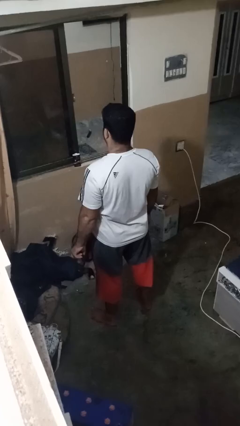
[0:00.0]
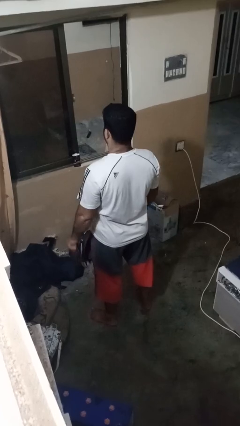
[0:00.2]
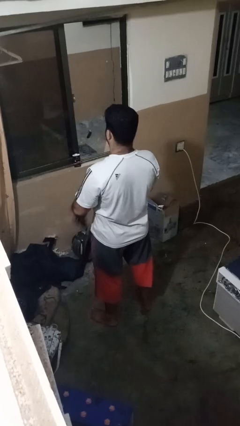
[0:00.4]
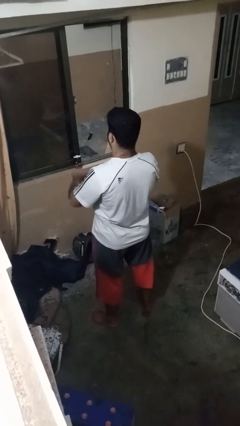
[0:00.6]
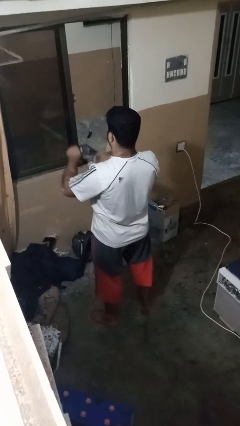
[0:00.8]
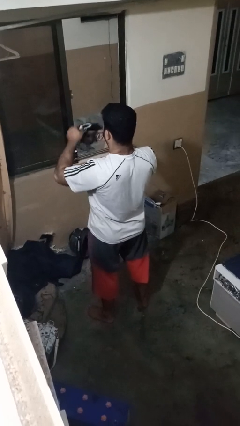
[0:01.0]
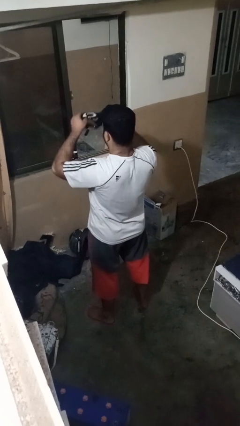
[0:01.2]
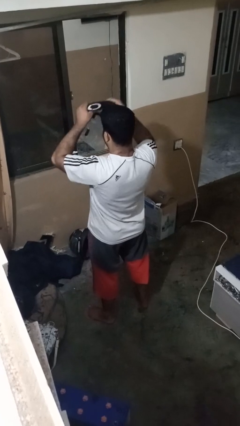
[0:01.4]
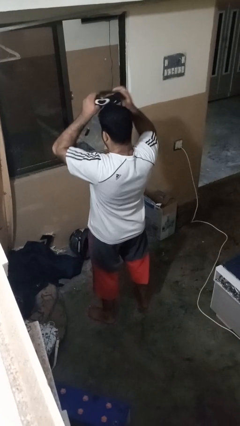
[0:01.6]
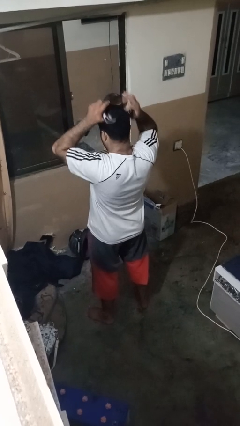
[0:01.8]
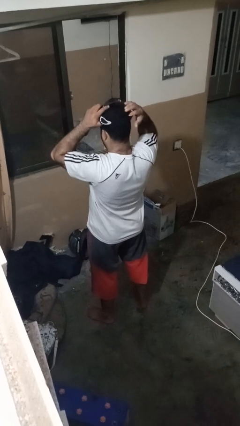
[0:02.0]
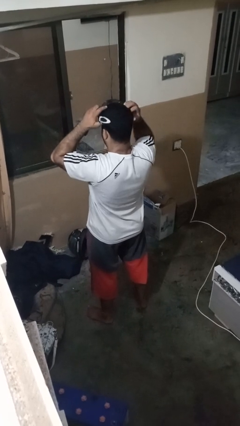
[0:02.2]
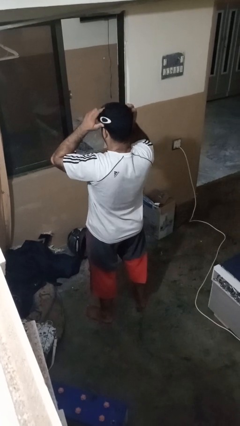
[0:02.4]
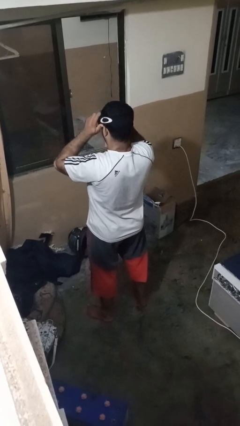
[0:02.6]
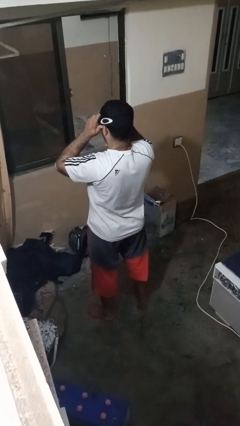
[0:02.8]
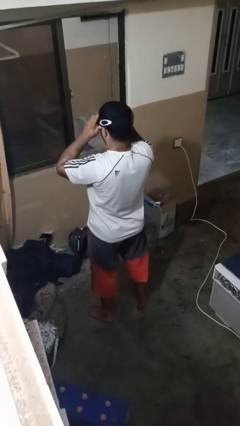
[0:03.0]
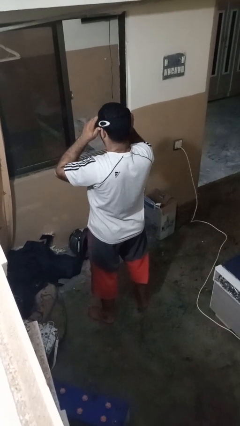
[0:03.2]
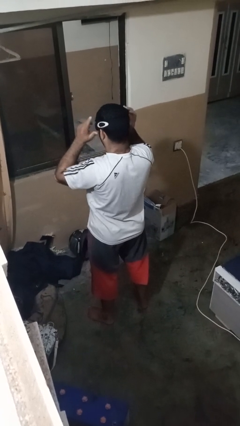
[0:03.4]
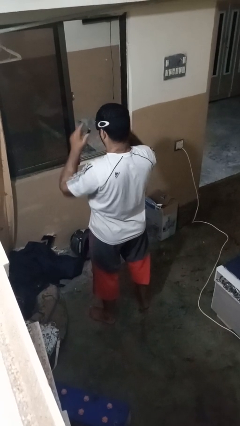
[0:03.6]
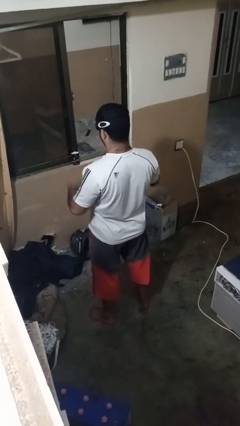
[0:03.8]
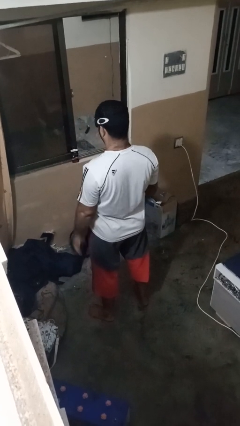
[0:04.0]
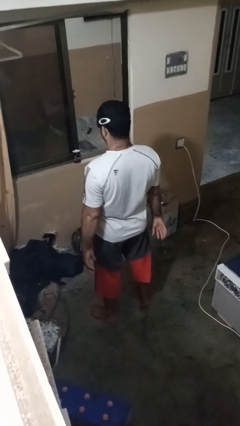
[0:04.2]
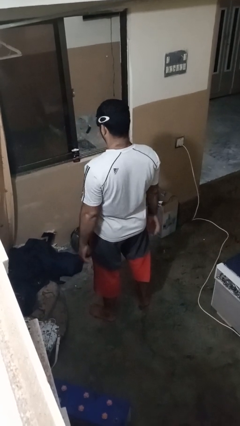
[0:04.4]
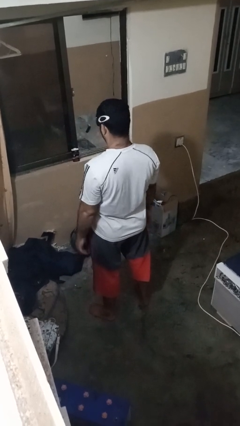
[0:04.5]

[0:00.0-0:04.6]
person puts on sunglasses

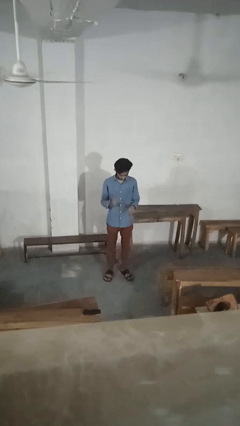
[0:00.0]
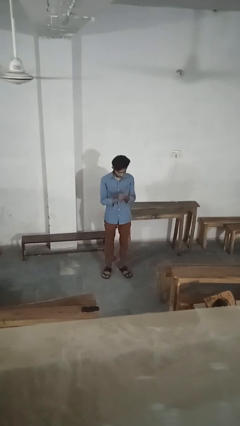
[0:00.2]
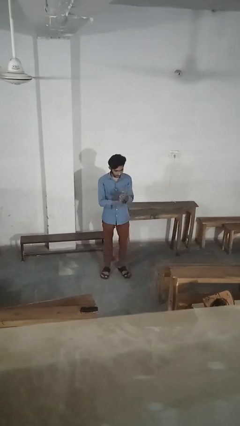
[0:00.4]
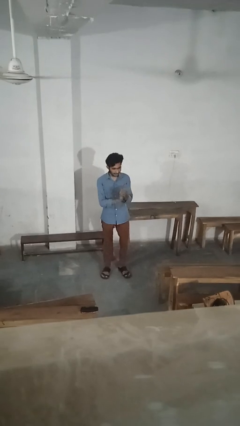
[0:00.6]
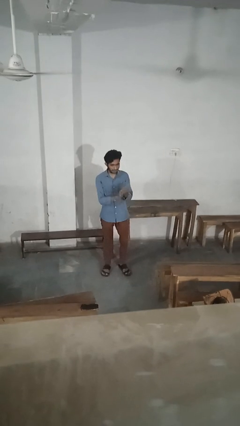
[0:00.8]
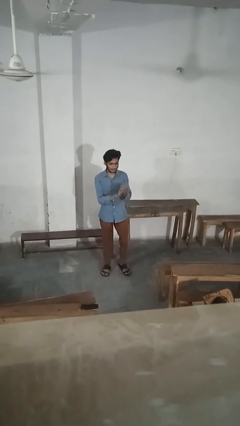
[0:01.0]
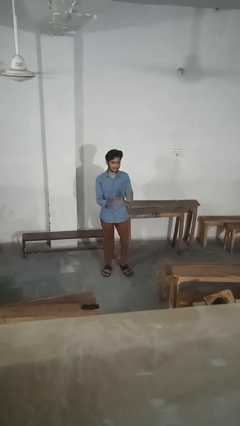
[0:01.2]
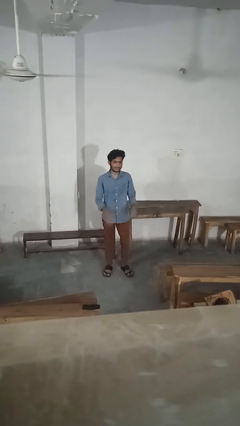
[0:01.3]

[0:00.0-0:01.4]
person claps hands

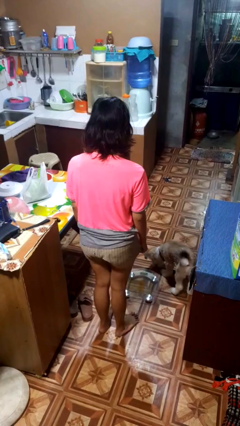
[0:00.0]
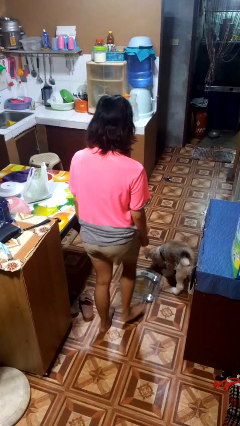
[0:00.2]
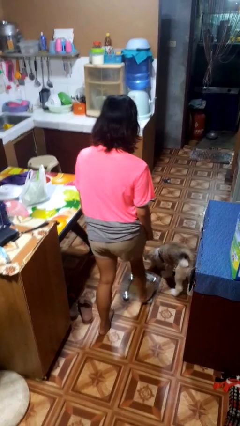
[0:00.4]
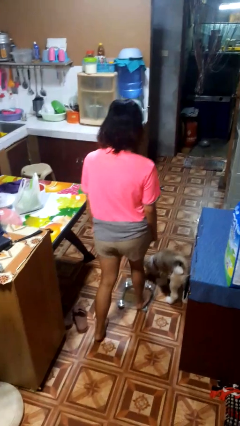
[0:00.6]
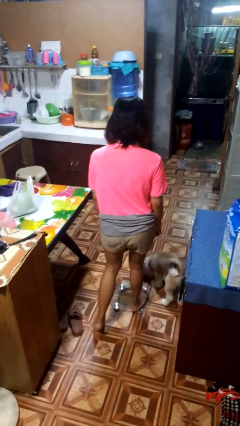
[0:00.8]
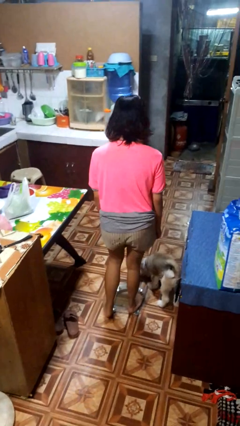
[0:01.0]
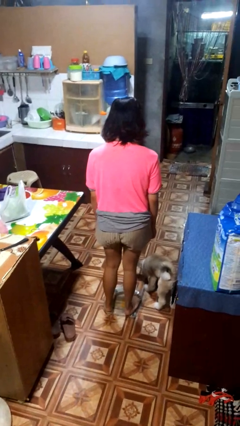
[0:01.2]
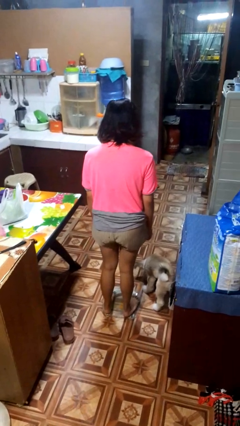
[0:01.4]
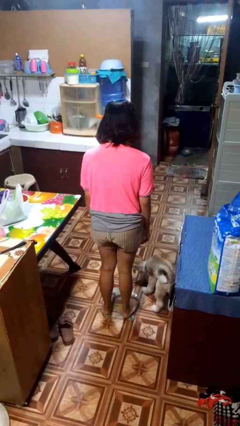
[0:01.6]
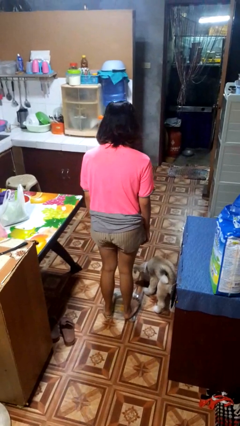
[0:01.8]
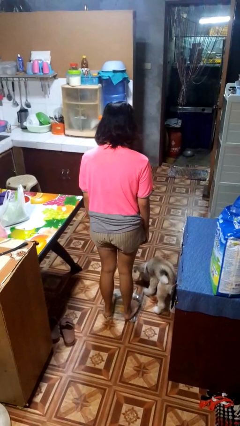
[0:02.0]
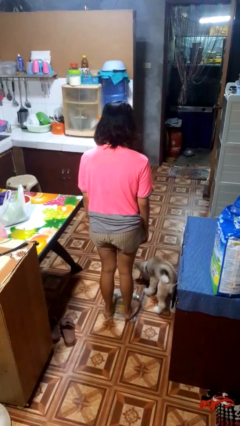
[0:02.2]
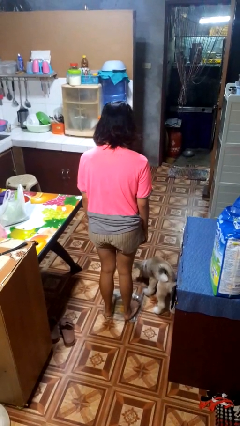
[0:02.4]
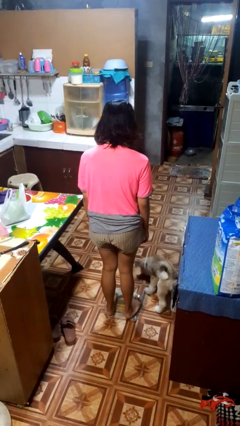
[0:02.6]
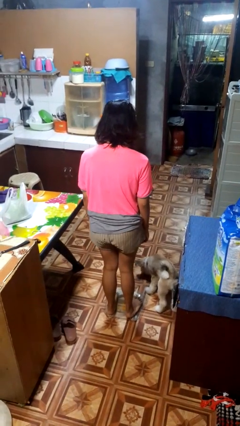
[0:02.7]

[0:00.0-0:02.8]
person uses bodyweight scale

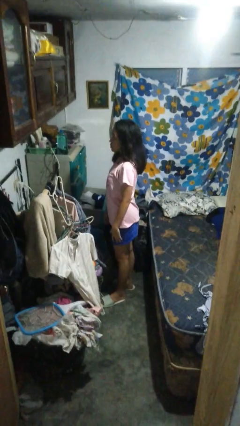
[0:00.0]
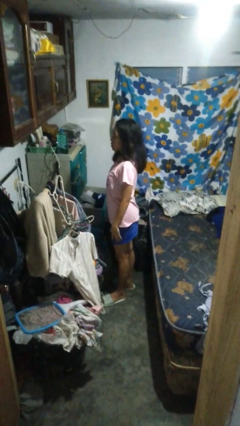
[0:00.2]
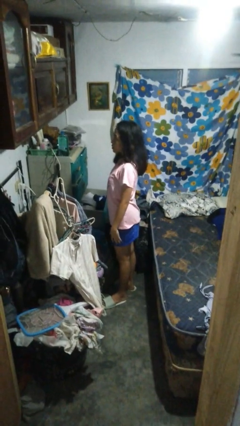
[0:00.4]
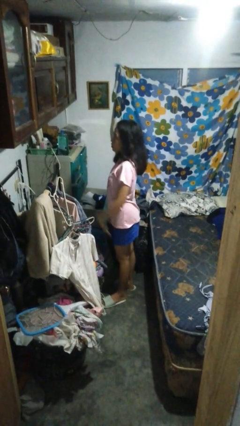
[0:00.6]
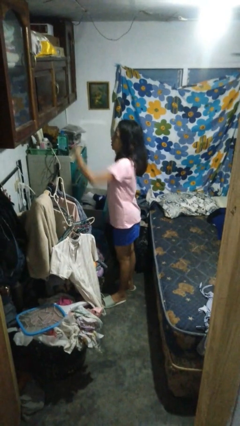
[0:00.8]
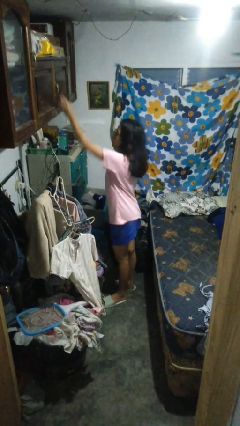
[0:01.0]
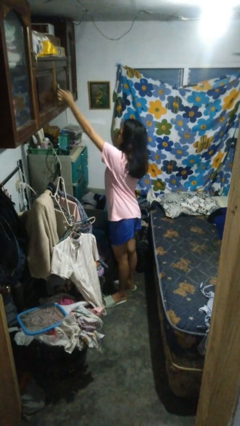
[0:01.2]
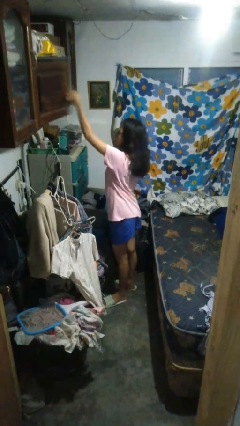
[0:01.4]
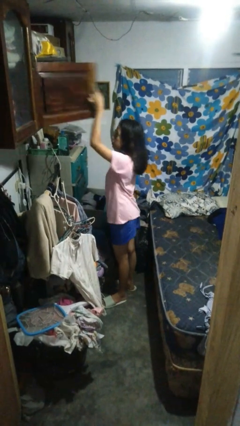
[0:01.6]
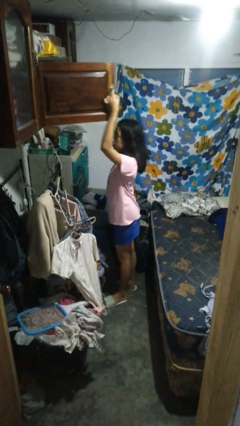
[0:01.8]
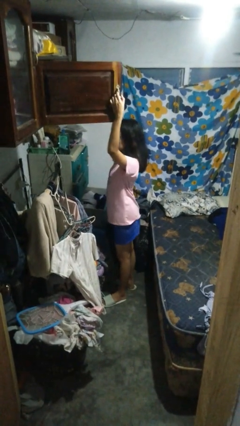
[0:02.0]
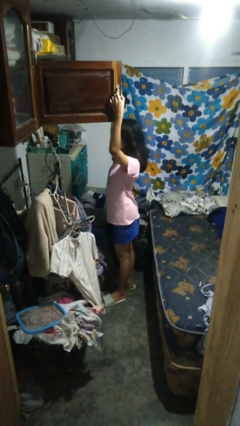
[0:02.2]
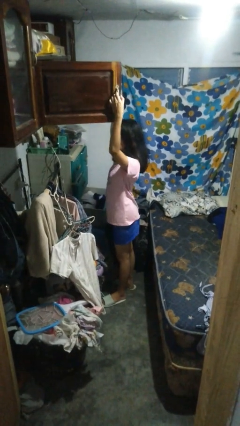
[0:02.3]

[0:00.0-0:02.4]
person opens closet door

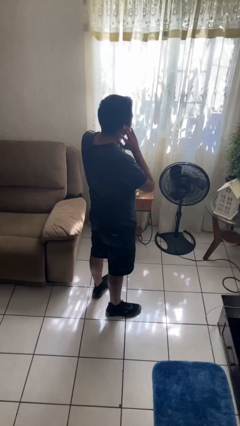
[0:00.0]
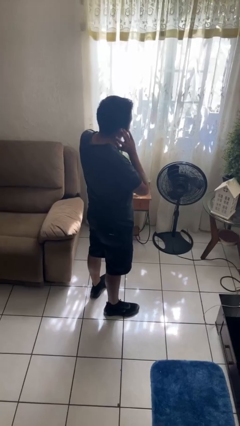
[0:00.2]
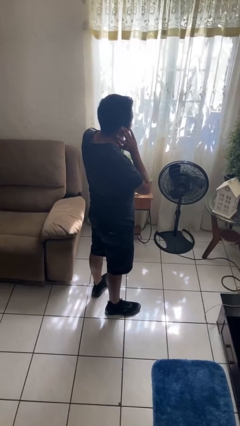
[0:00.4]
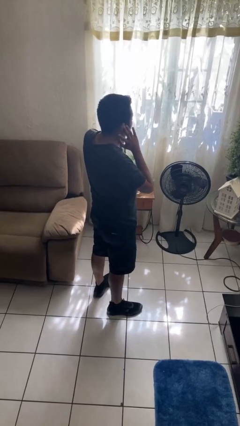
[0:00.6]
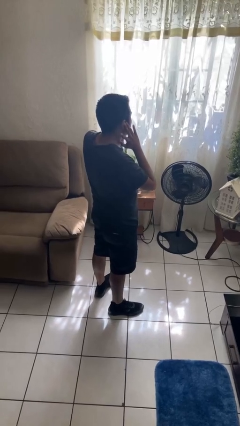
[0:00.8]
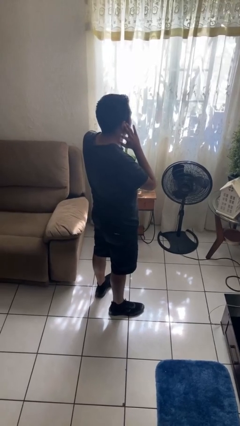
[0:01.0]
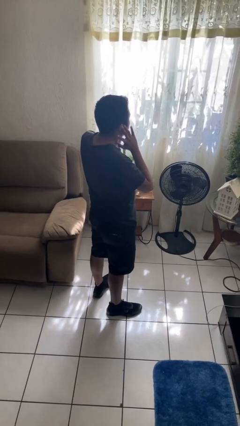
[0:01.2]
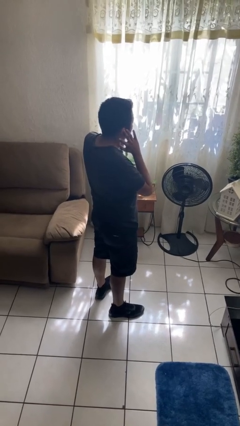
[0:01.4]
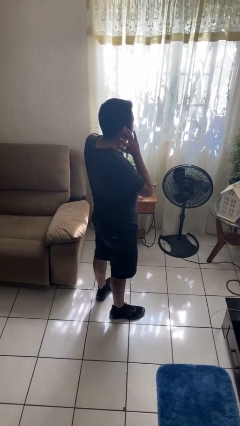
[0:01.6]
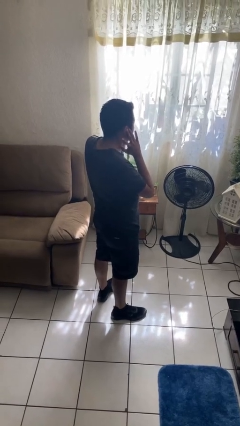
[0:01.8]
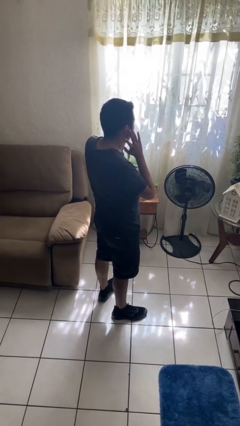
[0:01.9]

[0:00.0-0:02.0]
person puts fingers in ear

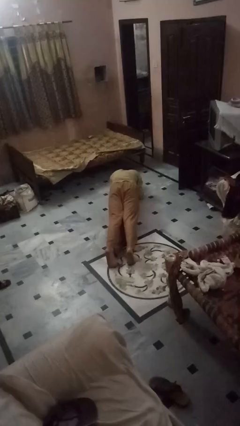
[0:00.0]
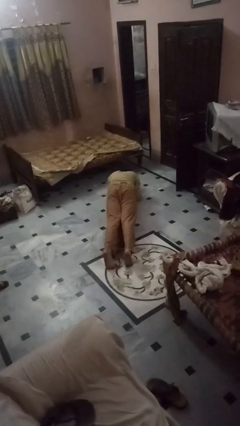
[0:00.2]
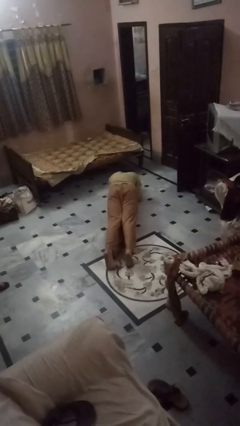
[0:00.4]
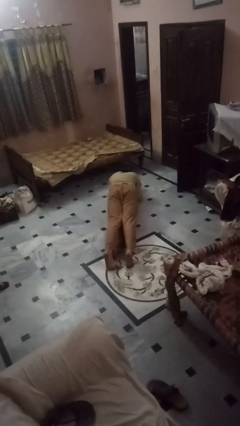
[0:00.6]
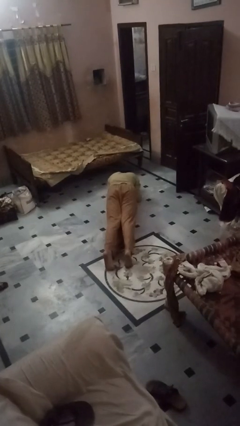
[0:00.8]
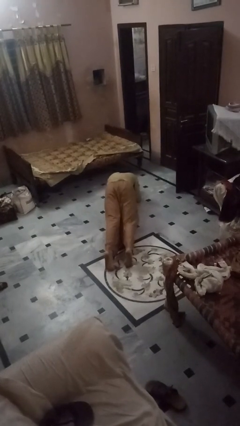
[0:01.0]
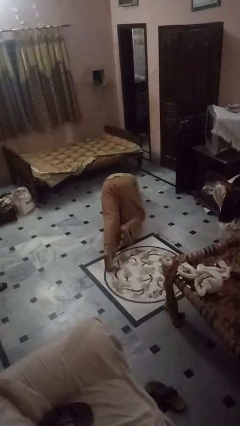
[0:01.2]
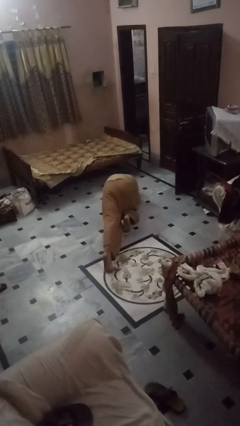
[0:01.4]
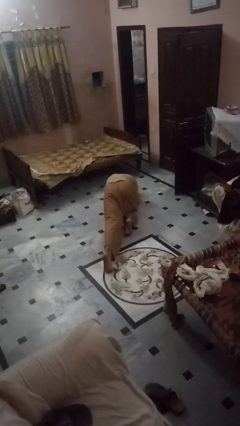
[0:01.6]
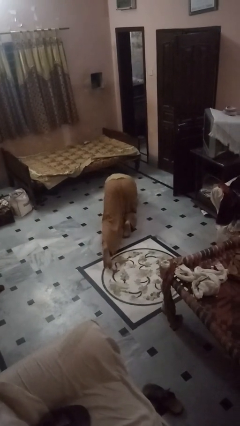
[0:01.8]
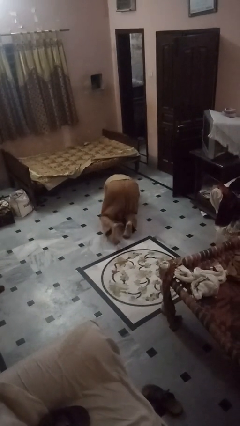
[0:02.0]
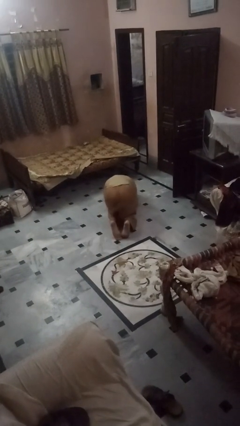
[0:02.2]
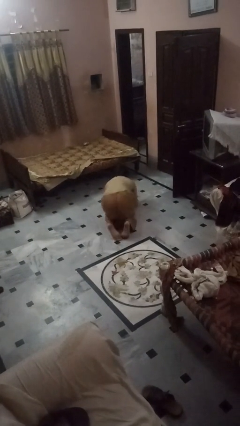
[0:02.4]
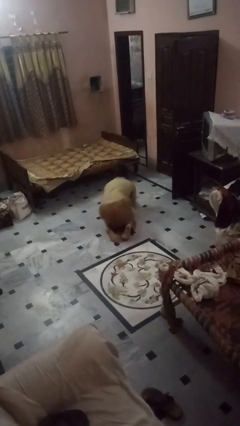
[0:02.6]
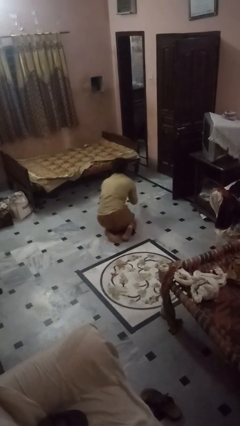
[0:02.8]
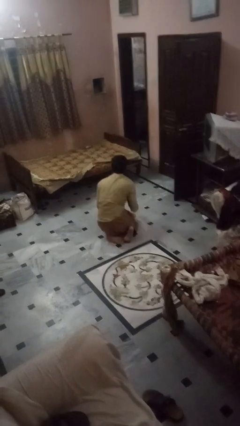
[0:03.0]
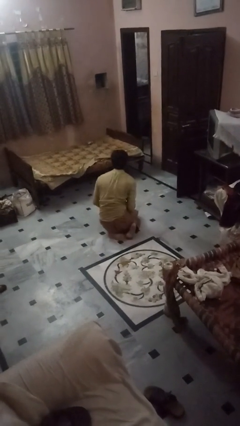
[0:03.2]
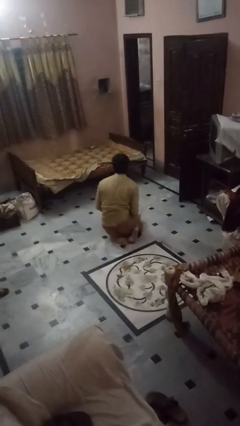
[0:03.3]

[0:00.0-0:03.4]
person stands up from floor

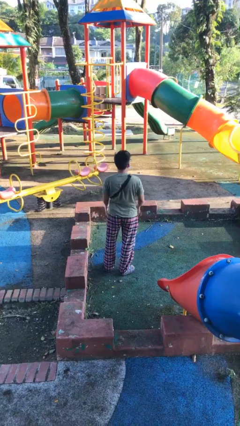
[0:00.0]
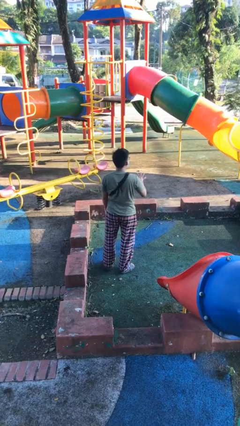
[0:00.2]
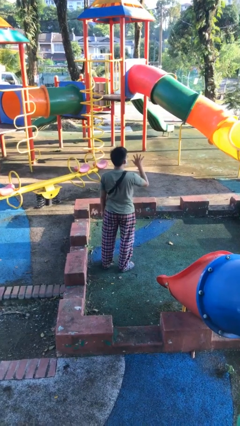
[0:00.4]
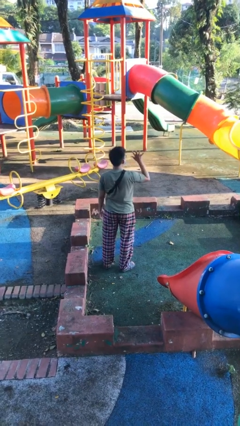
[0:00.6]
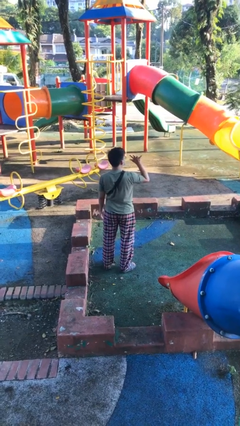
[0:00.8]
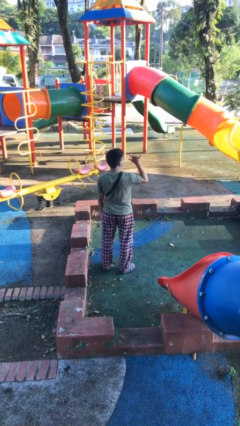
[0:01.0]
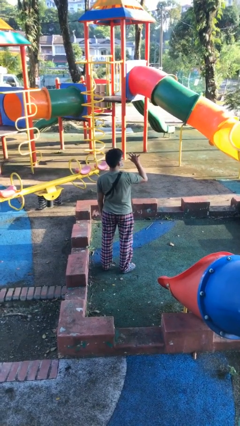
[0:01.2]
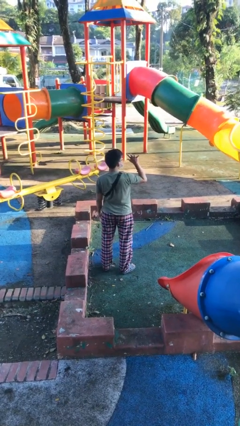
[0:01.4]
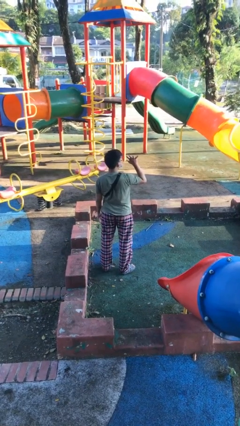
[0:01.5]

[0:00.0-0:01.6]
person gestures number five
